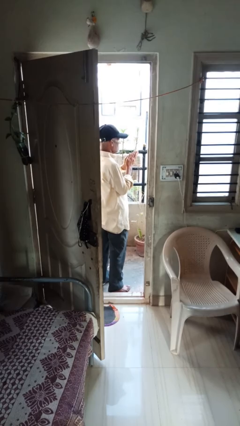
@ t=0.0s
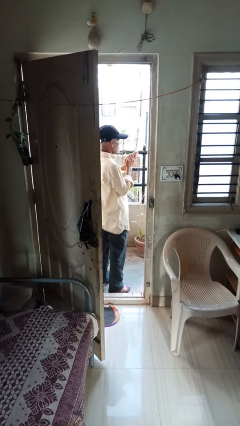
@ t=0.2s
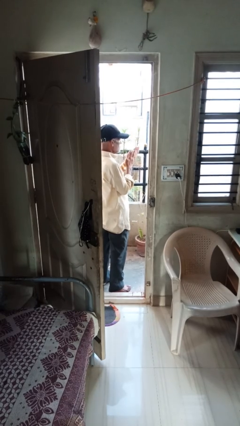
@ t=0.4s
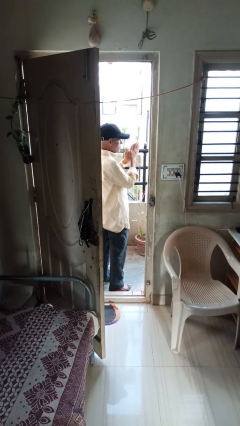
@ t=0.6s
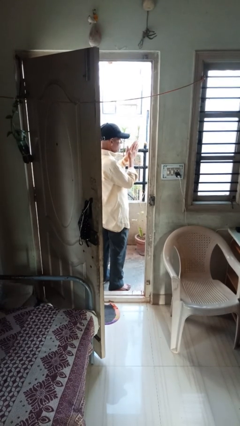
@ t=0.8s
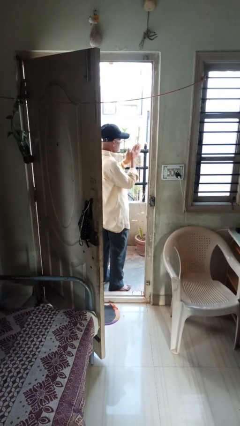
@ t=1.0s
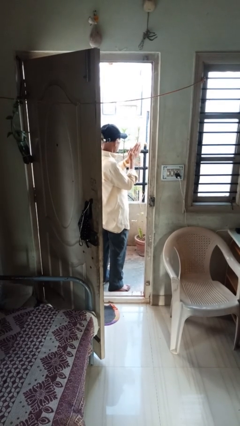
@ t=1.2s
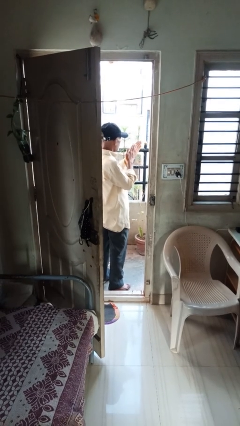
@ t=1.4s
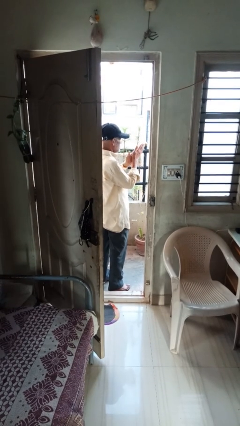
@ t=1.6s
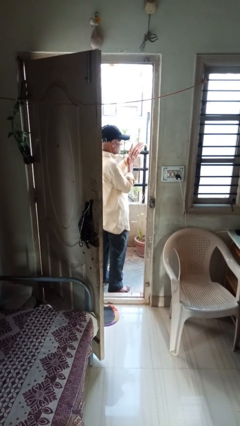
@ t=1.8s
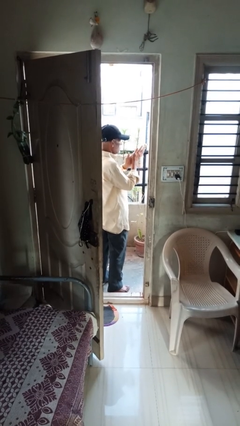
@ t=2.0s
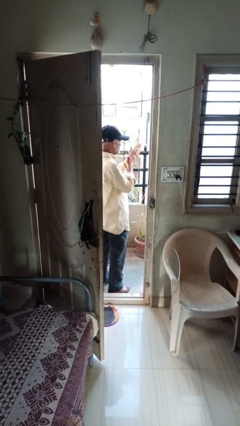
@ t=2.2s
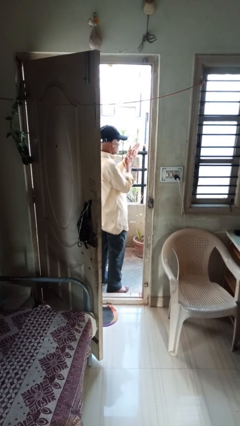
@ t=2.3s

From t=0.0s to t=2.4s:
person blows into hands

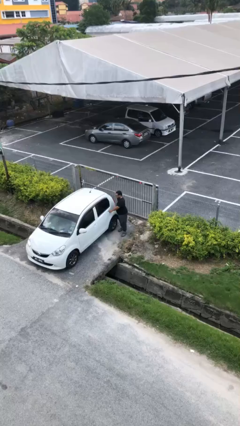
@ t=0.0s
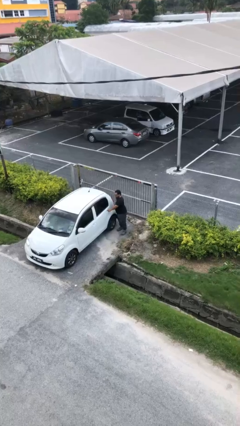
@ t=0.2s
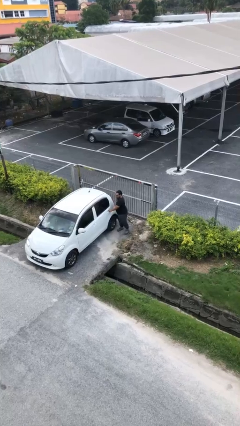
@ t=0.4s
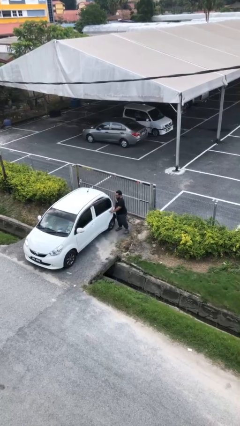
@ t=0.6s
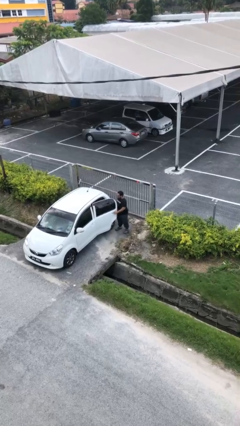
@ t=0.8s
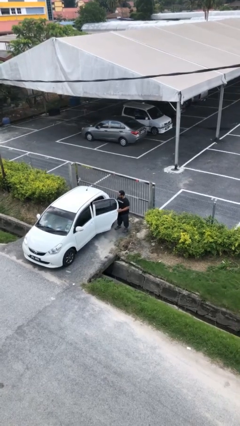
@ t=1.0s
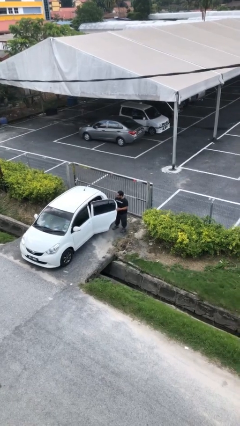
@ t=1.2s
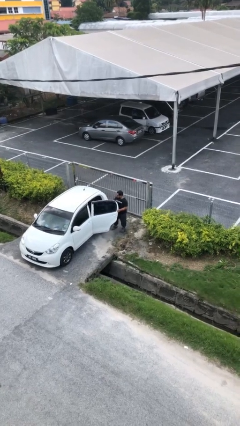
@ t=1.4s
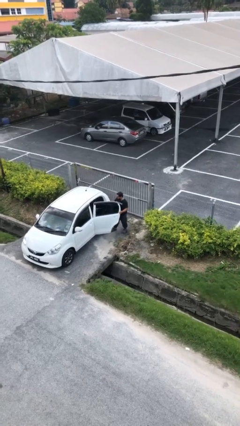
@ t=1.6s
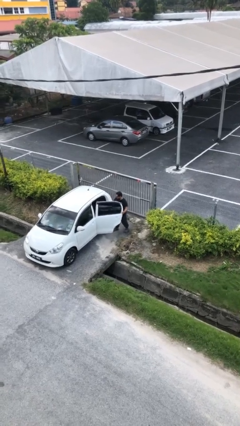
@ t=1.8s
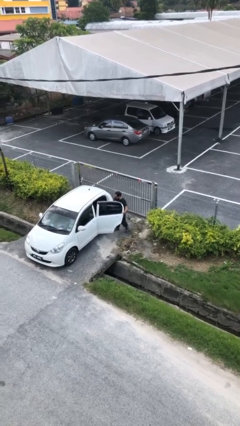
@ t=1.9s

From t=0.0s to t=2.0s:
person opens car door

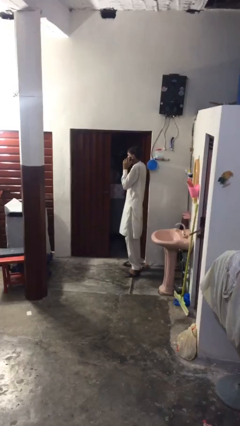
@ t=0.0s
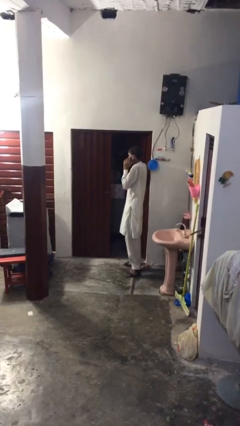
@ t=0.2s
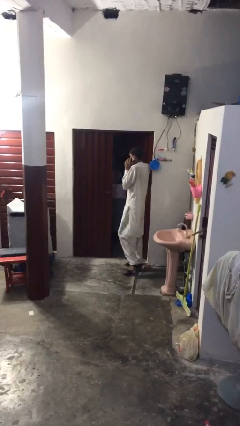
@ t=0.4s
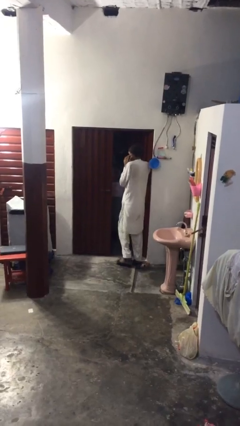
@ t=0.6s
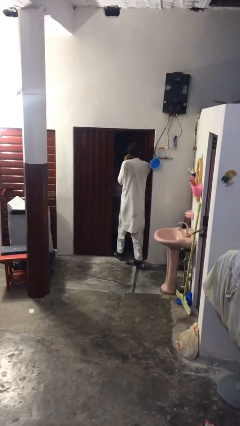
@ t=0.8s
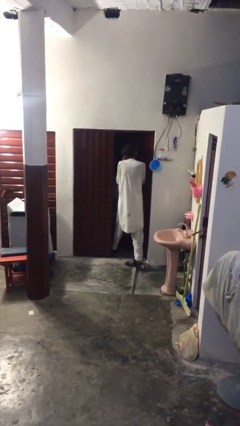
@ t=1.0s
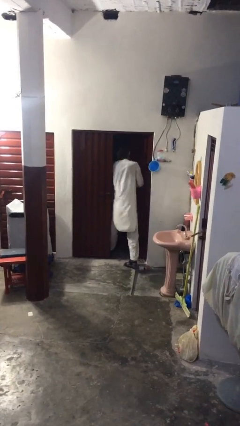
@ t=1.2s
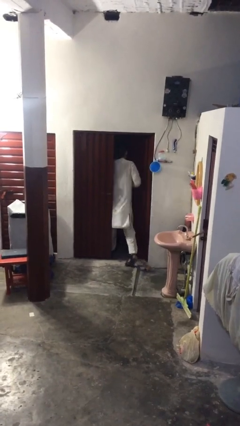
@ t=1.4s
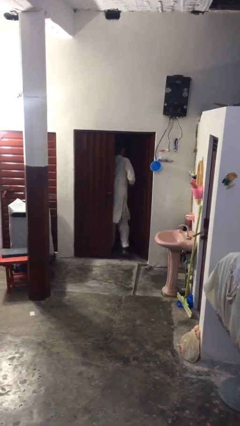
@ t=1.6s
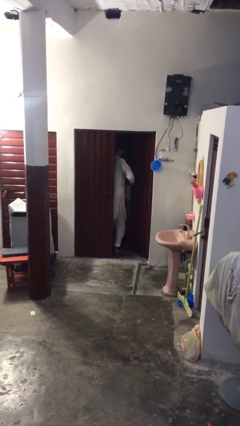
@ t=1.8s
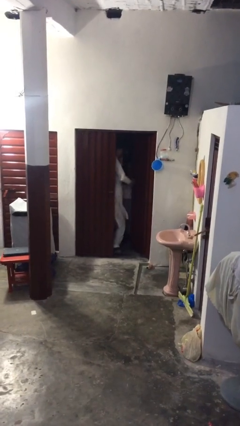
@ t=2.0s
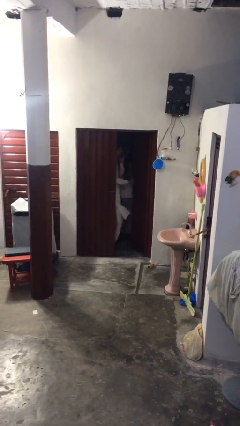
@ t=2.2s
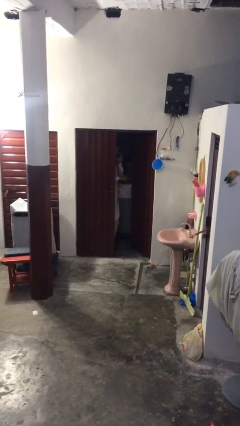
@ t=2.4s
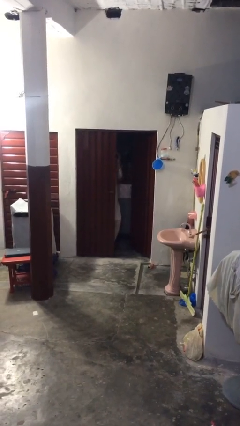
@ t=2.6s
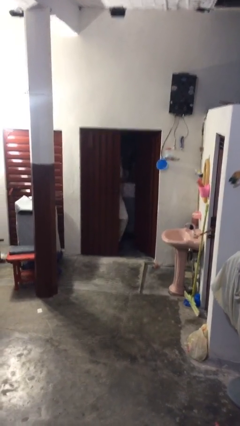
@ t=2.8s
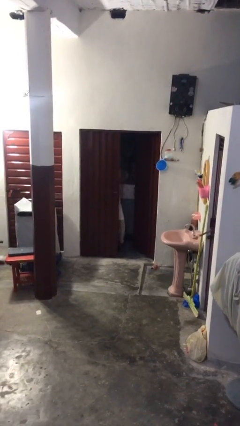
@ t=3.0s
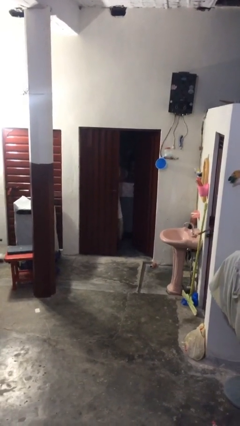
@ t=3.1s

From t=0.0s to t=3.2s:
person exits scene through structure

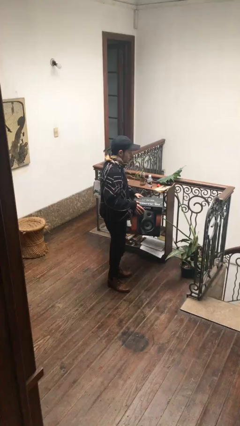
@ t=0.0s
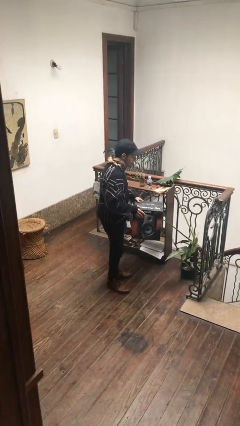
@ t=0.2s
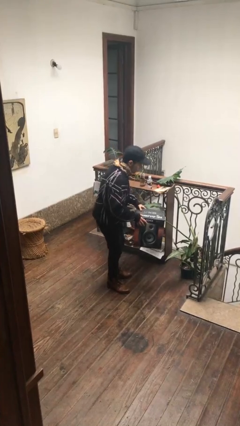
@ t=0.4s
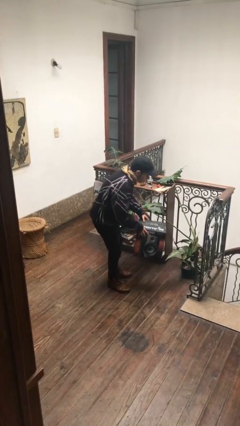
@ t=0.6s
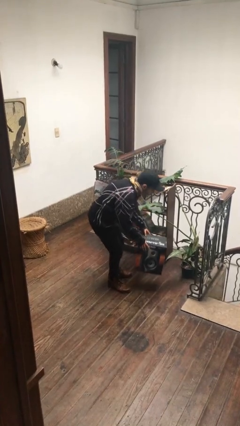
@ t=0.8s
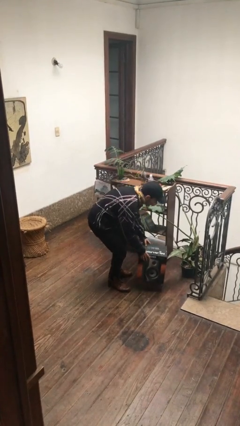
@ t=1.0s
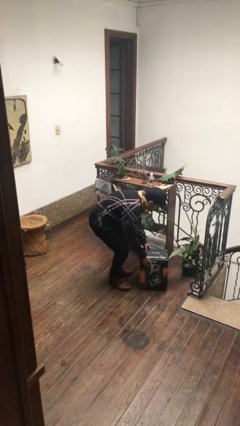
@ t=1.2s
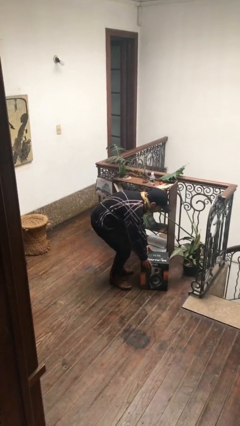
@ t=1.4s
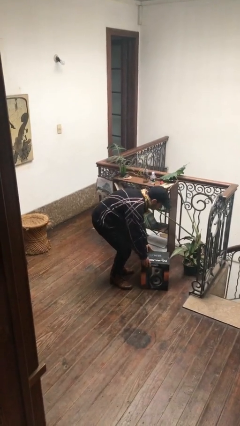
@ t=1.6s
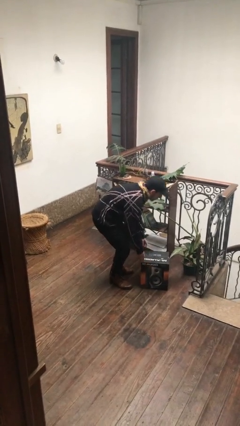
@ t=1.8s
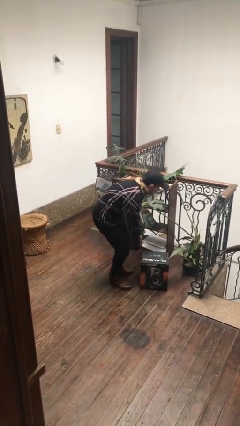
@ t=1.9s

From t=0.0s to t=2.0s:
person puts down object on floor

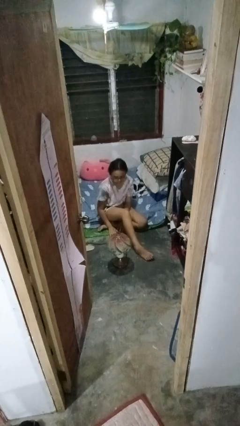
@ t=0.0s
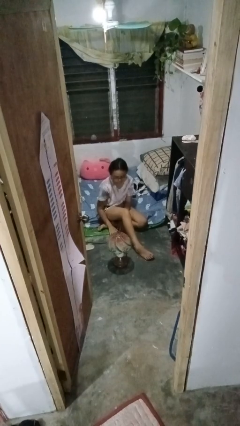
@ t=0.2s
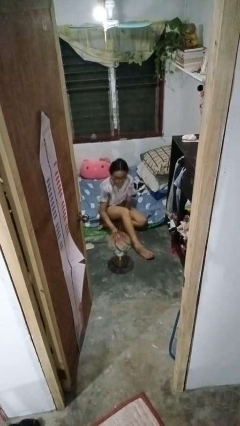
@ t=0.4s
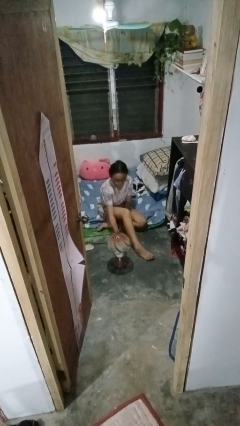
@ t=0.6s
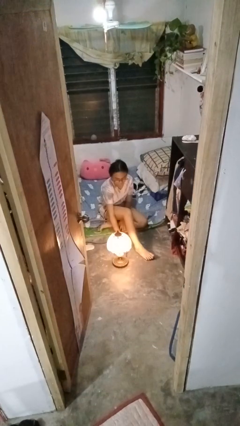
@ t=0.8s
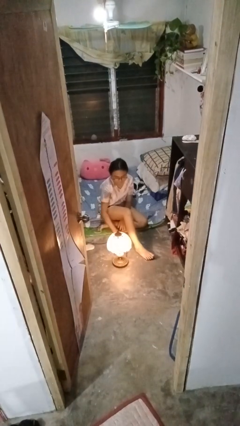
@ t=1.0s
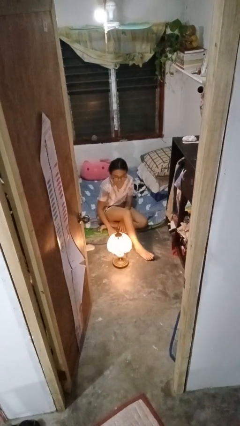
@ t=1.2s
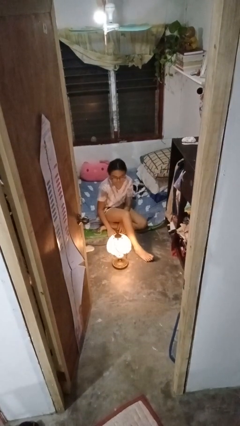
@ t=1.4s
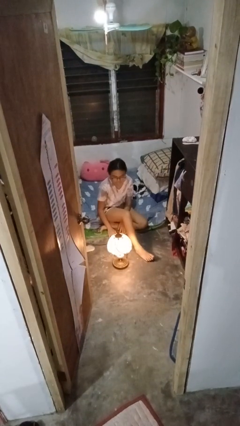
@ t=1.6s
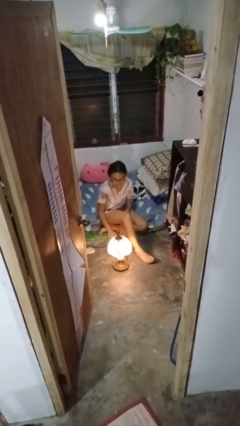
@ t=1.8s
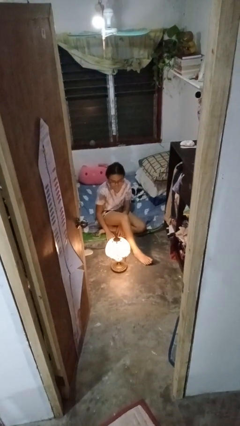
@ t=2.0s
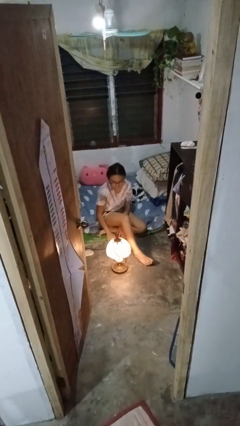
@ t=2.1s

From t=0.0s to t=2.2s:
person turns on lamp

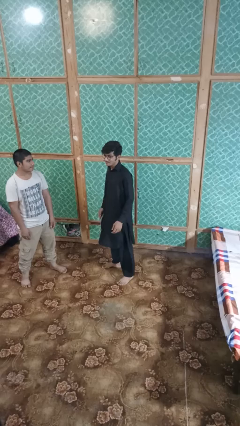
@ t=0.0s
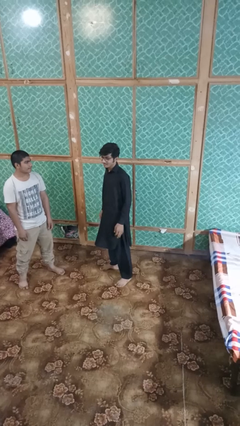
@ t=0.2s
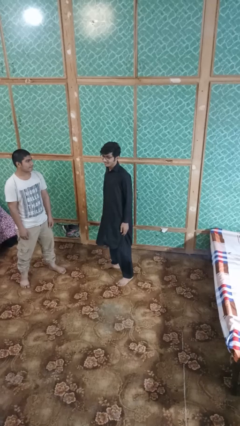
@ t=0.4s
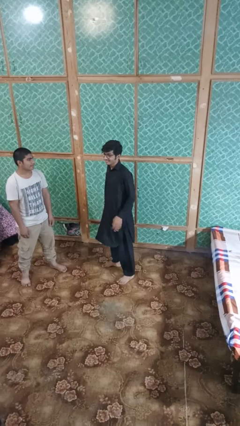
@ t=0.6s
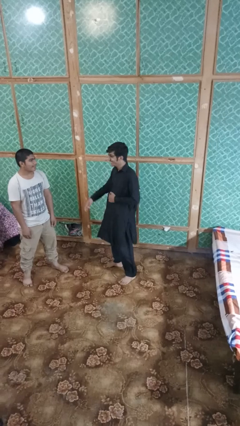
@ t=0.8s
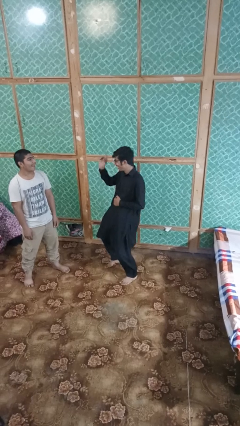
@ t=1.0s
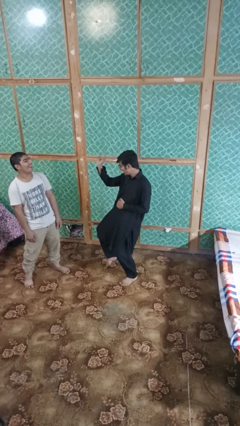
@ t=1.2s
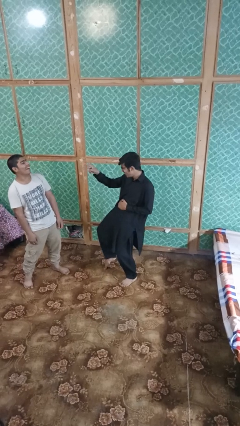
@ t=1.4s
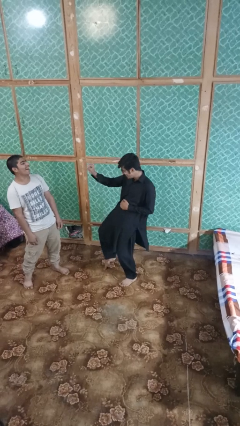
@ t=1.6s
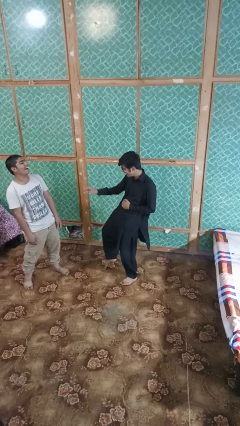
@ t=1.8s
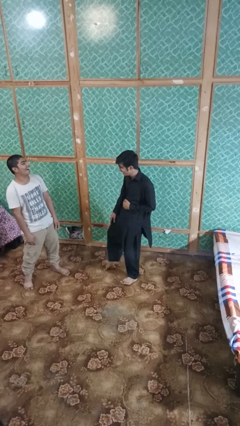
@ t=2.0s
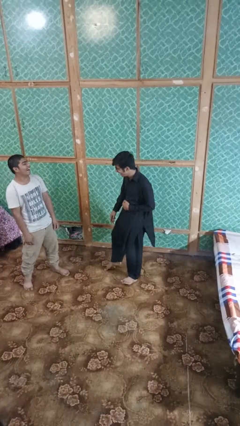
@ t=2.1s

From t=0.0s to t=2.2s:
person laughs with person

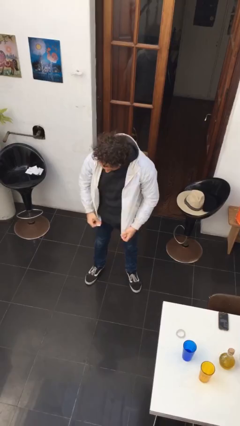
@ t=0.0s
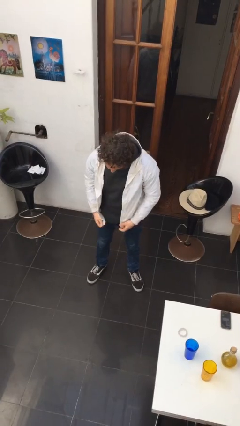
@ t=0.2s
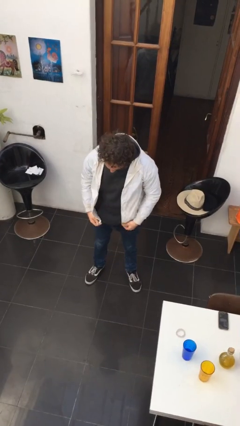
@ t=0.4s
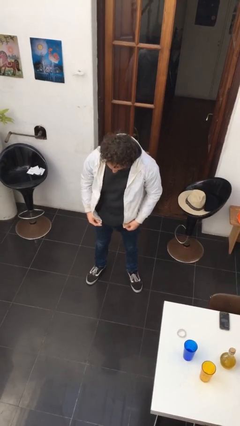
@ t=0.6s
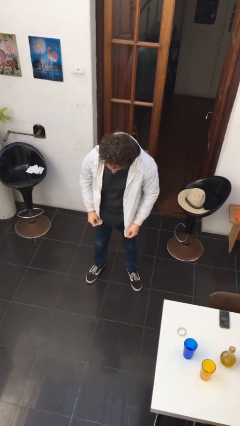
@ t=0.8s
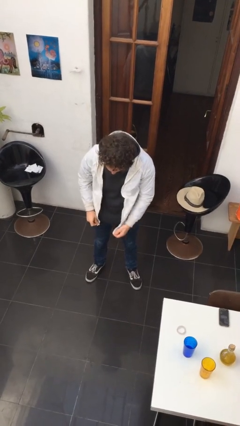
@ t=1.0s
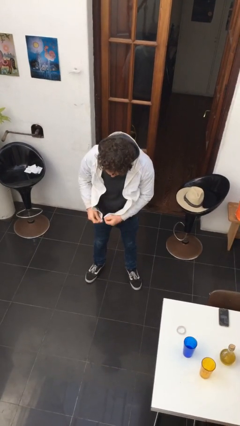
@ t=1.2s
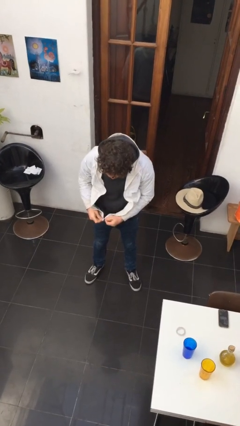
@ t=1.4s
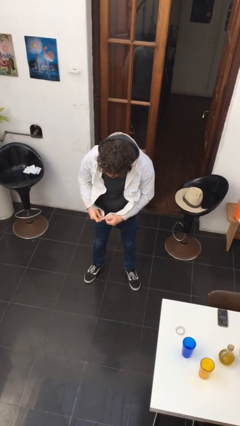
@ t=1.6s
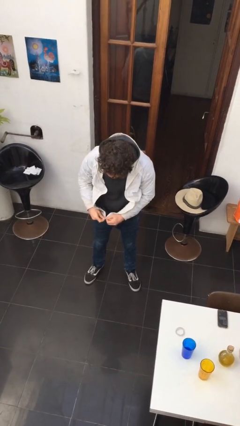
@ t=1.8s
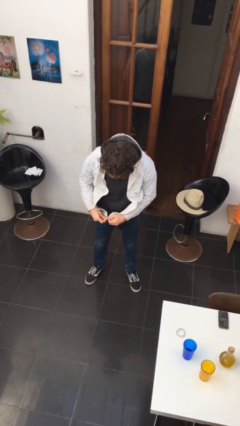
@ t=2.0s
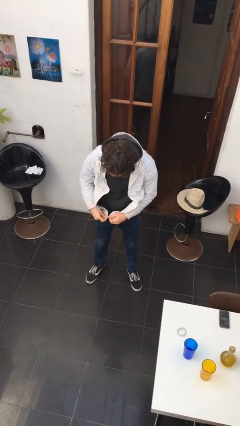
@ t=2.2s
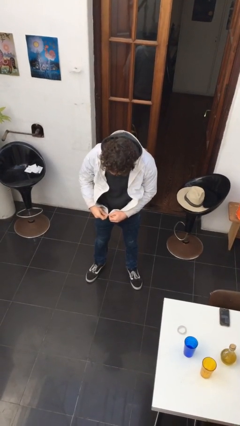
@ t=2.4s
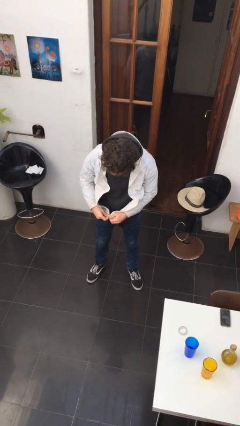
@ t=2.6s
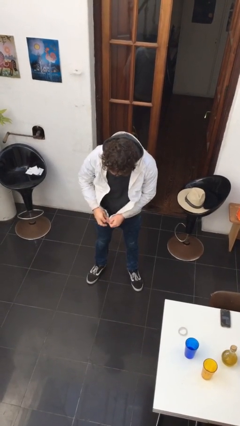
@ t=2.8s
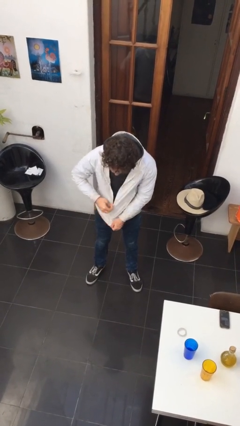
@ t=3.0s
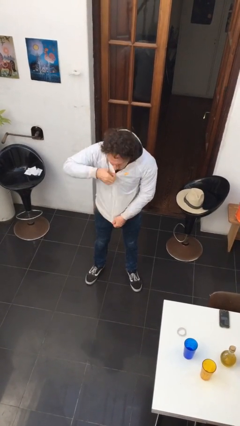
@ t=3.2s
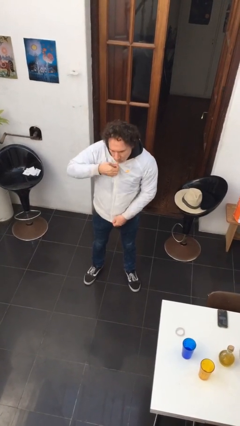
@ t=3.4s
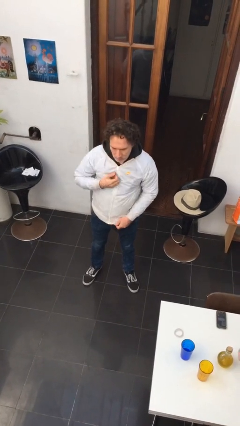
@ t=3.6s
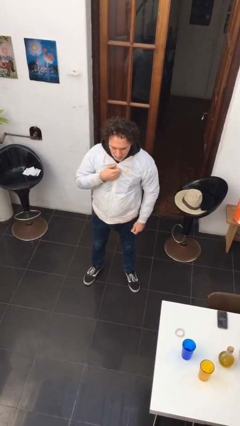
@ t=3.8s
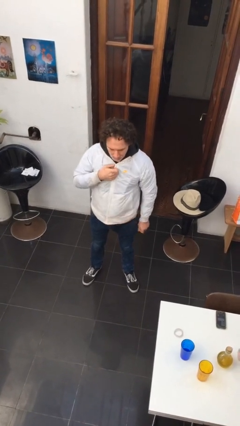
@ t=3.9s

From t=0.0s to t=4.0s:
person zips up jacket
